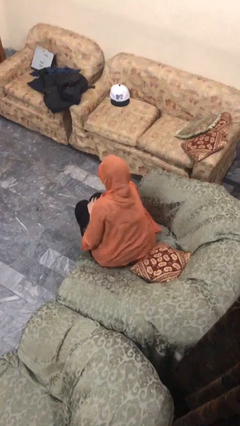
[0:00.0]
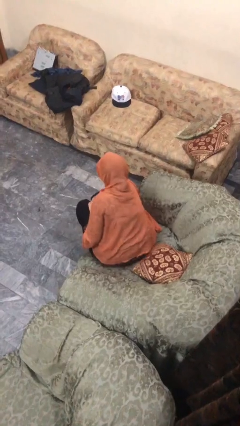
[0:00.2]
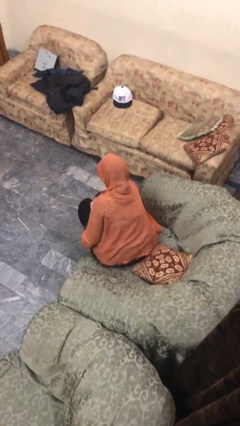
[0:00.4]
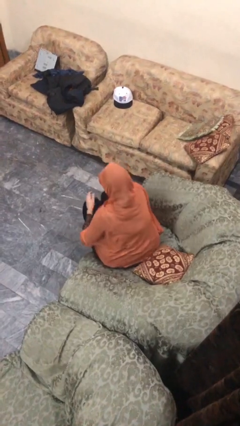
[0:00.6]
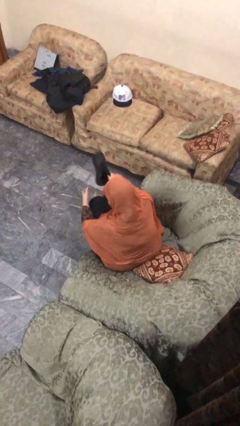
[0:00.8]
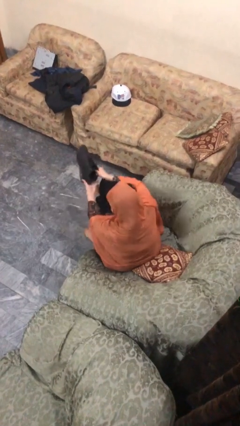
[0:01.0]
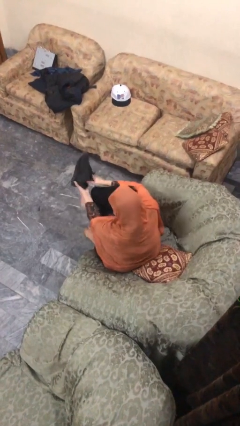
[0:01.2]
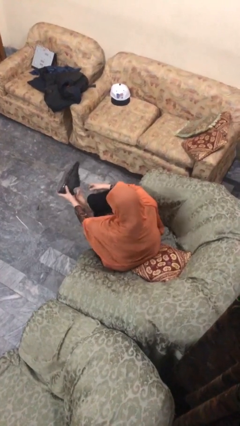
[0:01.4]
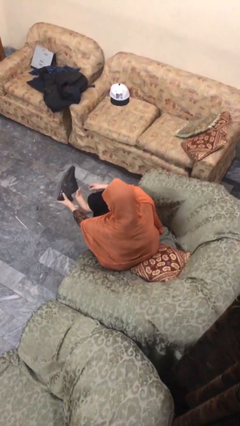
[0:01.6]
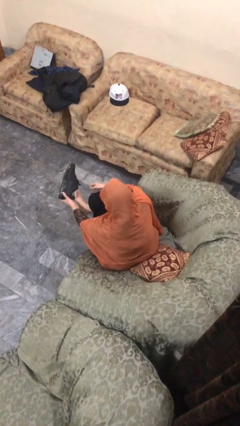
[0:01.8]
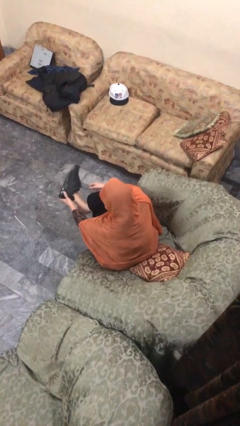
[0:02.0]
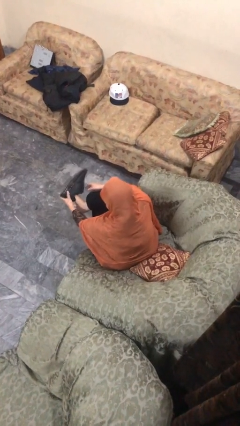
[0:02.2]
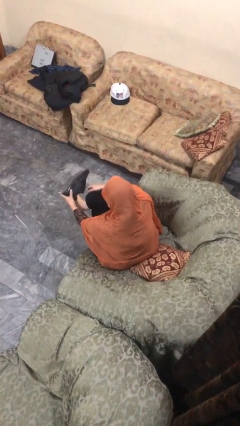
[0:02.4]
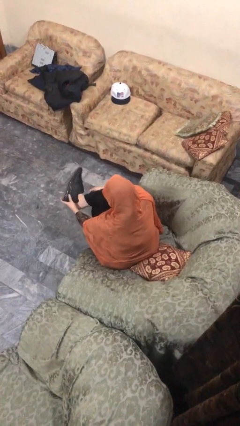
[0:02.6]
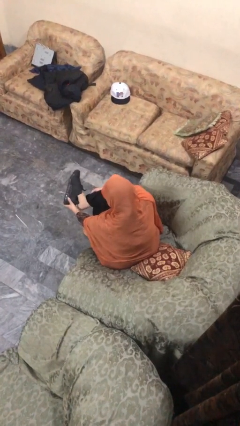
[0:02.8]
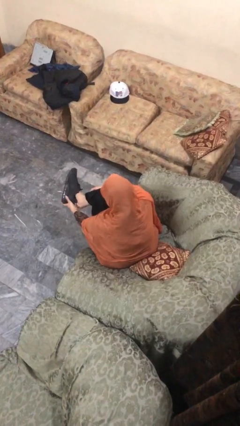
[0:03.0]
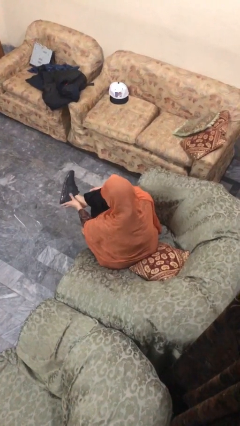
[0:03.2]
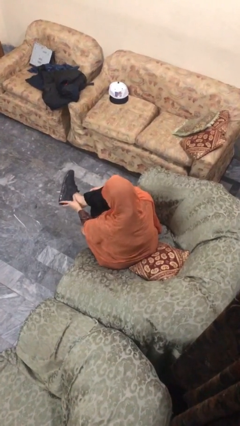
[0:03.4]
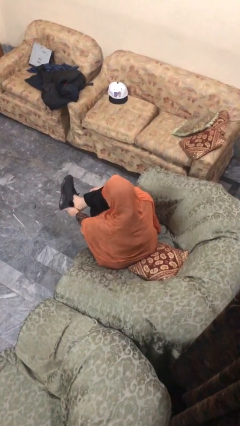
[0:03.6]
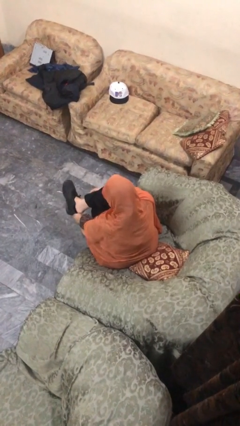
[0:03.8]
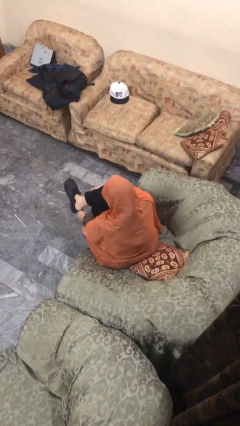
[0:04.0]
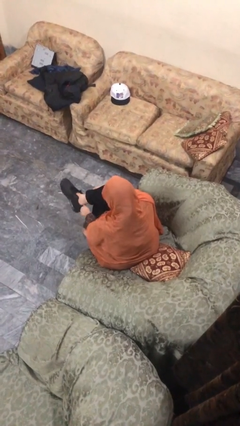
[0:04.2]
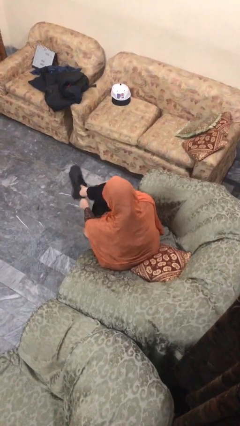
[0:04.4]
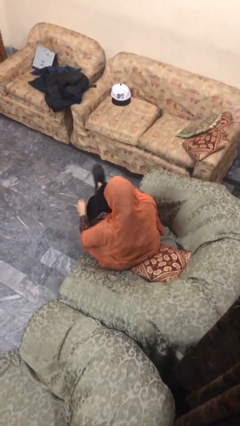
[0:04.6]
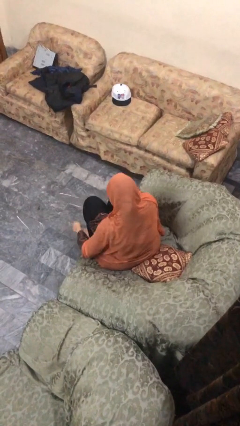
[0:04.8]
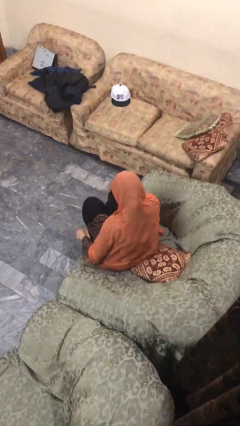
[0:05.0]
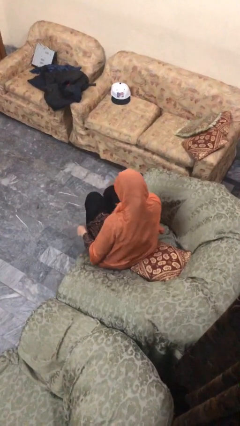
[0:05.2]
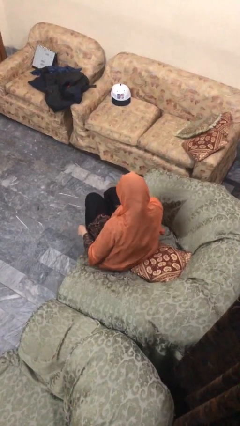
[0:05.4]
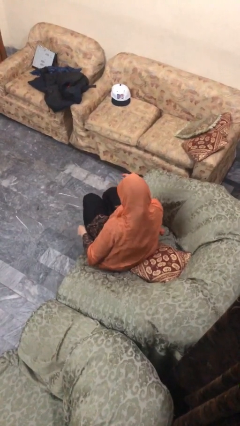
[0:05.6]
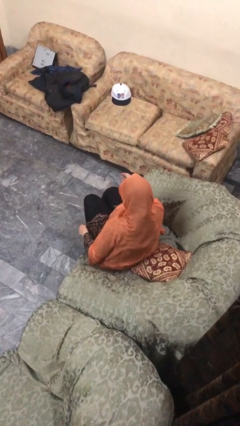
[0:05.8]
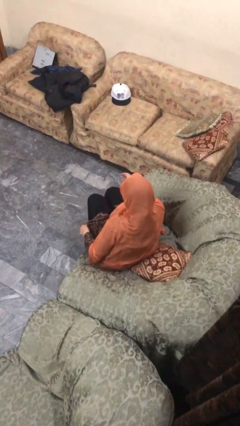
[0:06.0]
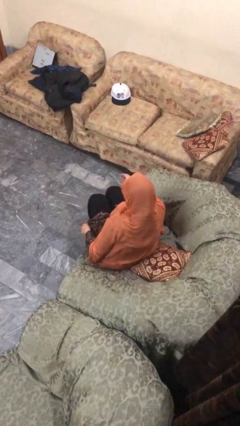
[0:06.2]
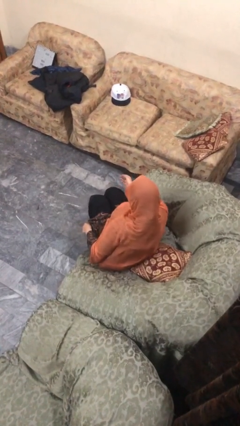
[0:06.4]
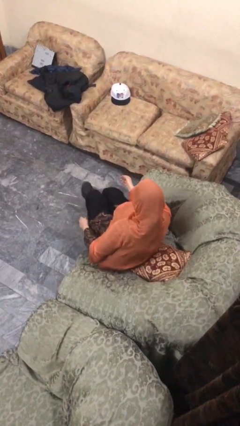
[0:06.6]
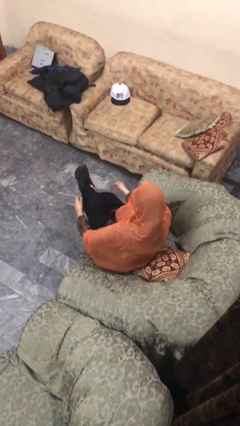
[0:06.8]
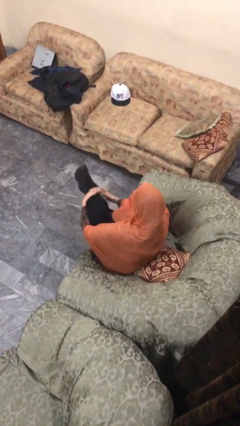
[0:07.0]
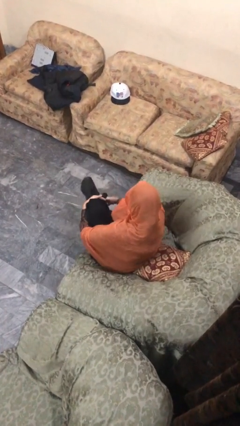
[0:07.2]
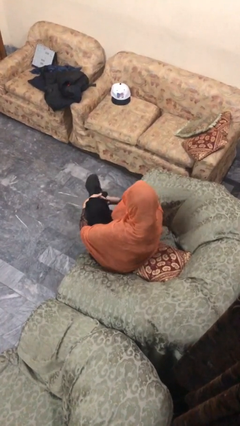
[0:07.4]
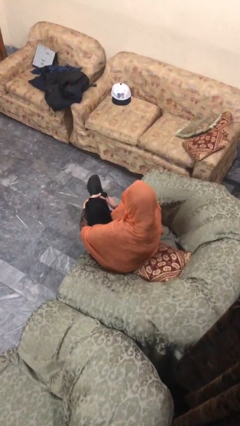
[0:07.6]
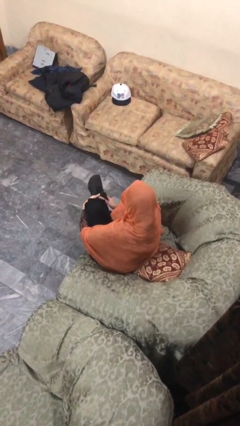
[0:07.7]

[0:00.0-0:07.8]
person puts on shoes

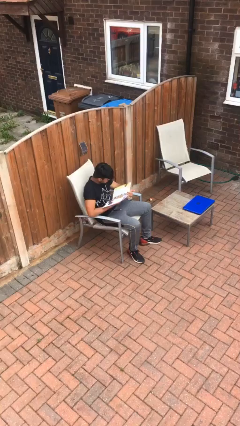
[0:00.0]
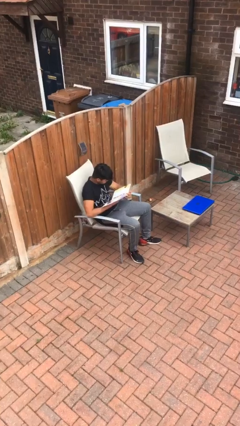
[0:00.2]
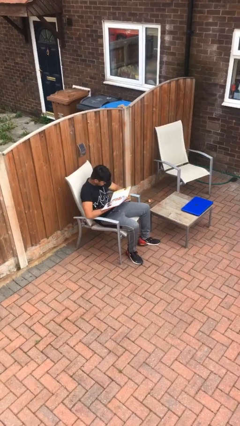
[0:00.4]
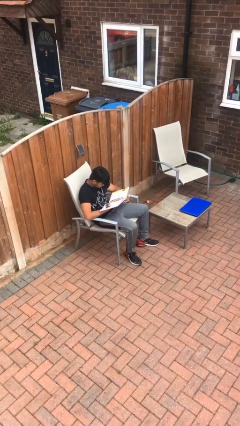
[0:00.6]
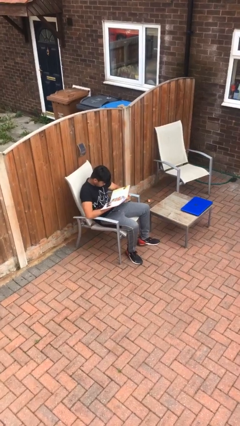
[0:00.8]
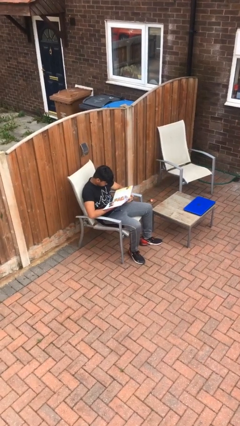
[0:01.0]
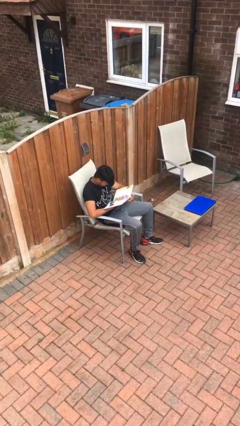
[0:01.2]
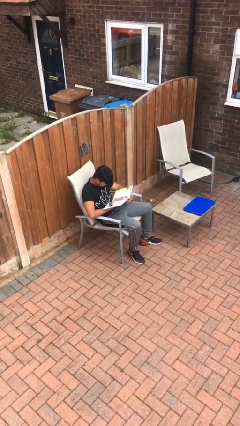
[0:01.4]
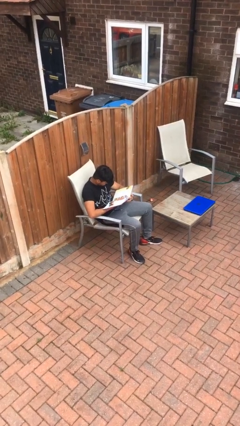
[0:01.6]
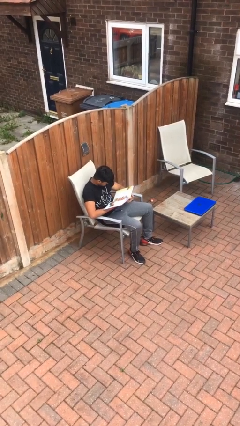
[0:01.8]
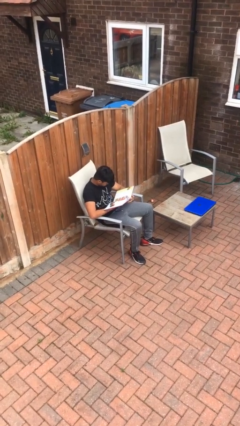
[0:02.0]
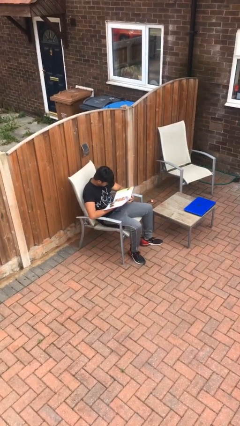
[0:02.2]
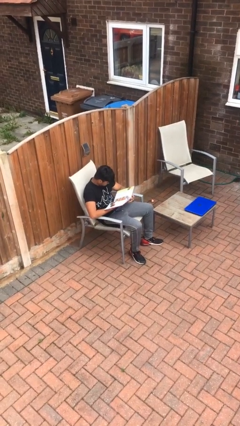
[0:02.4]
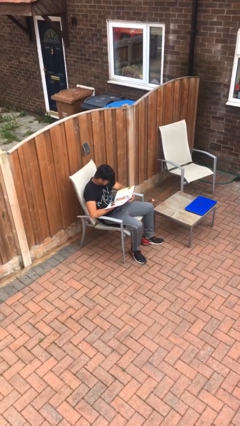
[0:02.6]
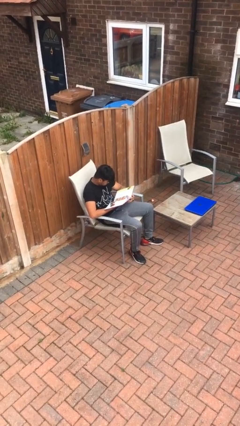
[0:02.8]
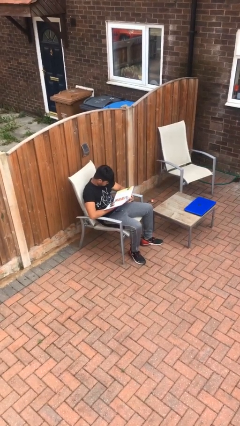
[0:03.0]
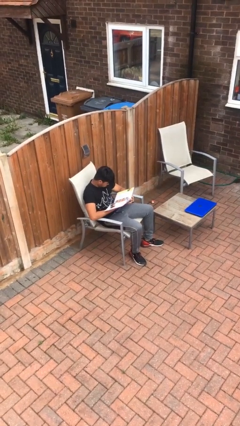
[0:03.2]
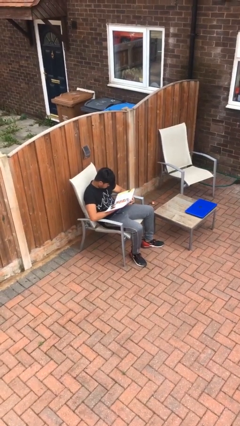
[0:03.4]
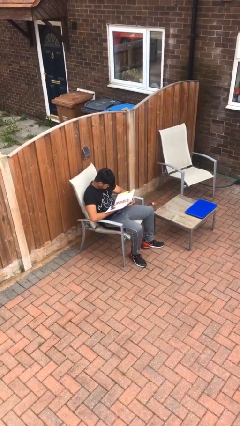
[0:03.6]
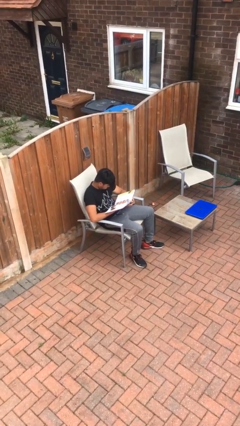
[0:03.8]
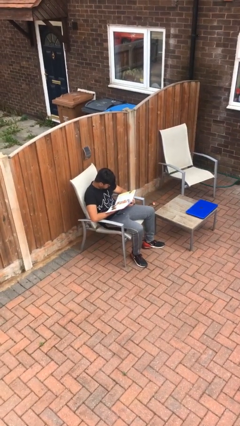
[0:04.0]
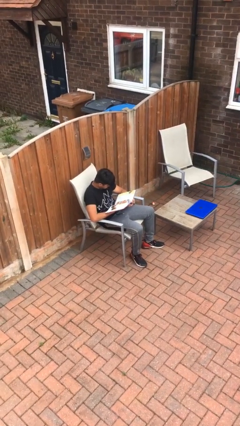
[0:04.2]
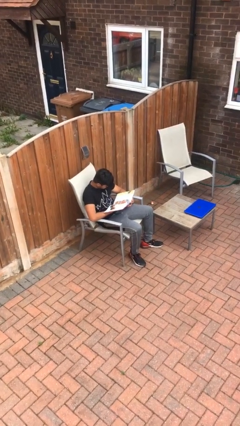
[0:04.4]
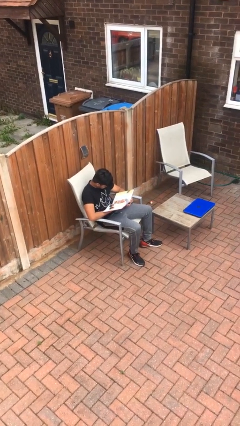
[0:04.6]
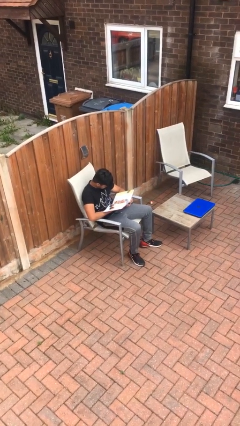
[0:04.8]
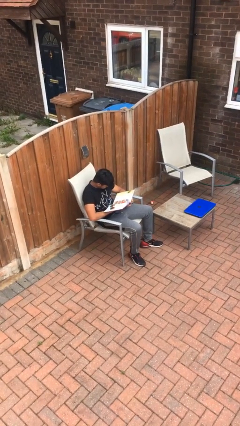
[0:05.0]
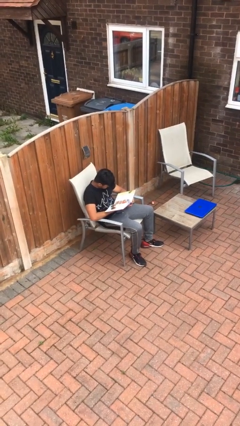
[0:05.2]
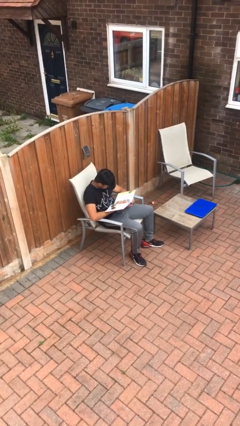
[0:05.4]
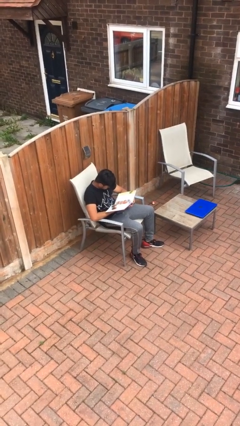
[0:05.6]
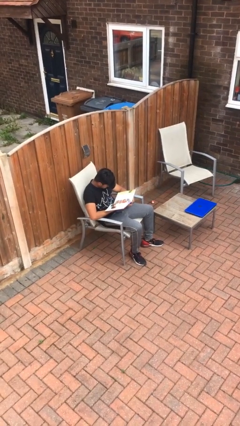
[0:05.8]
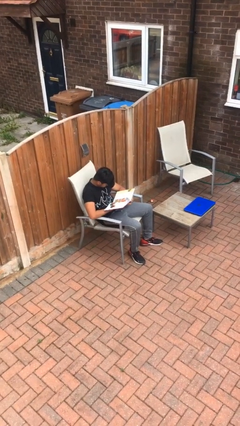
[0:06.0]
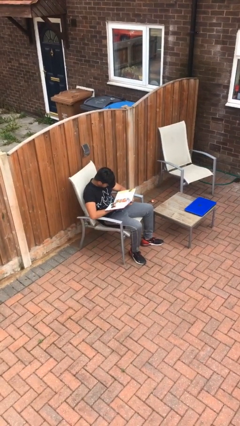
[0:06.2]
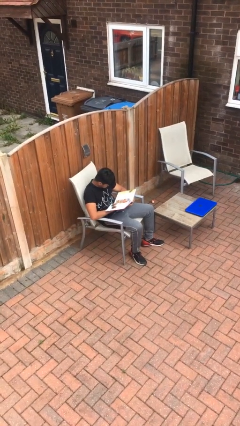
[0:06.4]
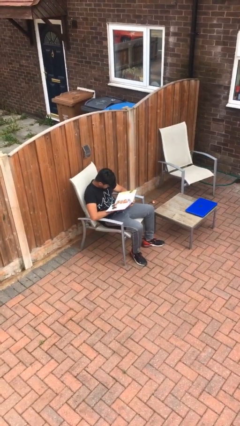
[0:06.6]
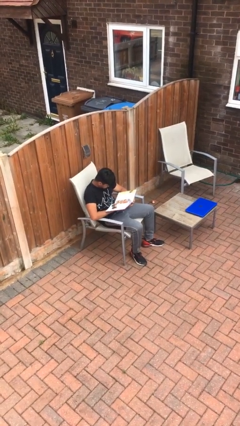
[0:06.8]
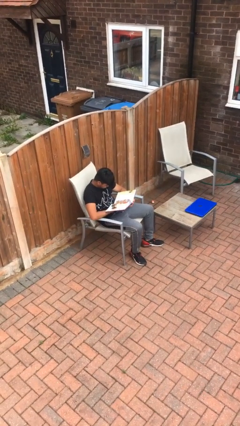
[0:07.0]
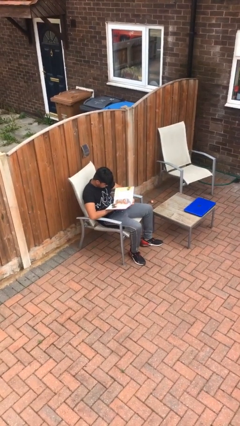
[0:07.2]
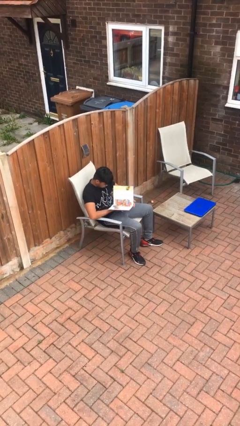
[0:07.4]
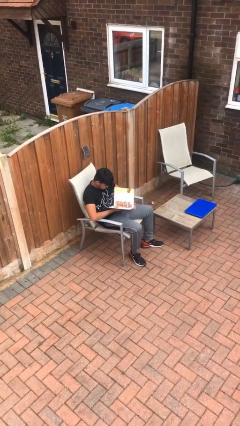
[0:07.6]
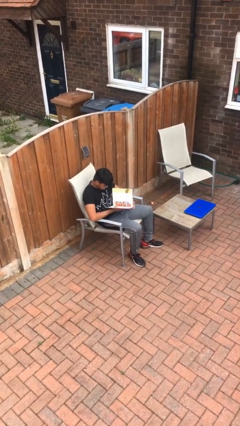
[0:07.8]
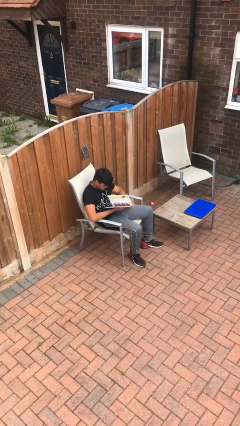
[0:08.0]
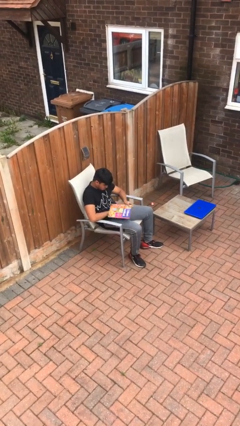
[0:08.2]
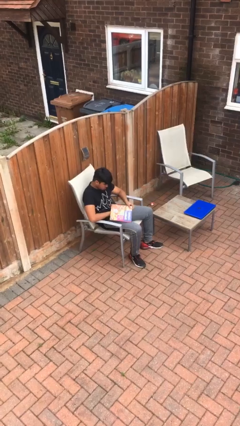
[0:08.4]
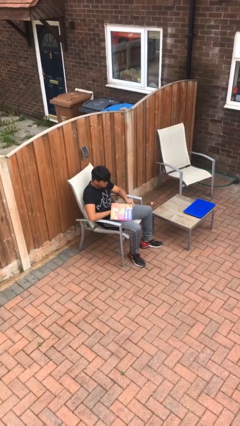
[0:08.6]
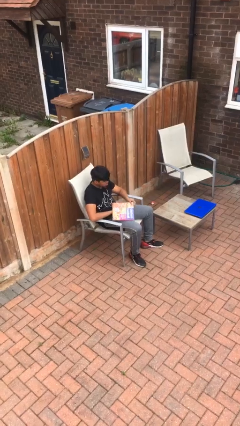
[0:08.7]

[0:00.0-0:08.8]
person reads document

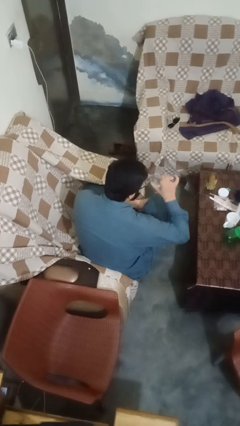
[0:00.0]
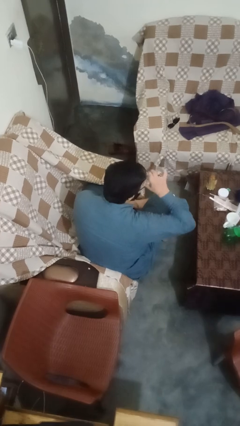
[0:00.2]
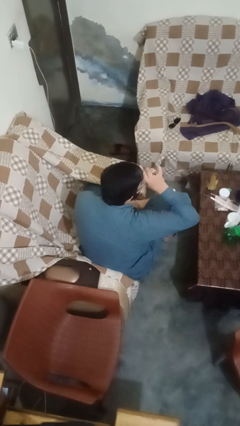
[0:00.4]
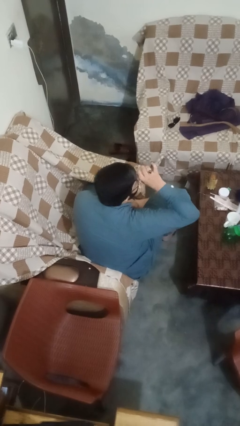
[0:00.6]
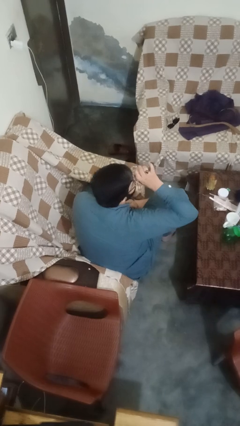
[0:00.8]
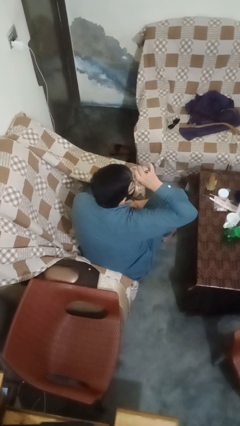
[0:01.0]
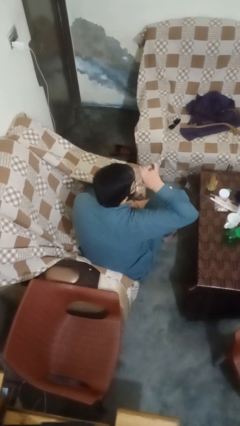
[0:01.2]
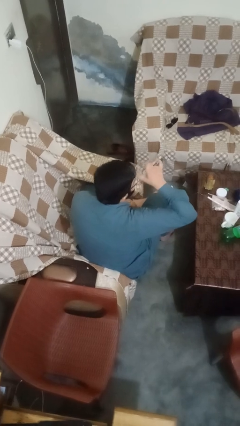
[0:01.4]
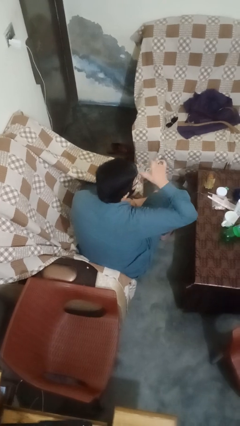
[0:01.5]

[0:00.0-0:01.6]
person drinks from shotglass
